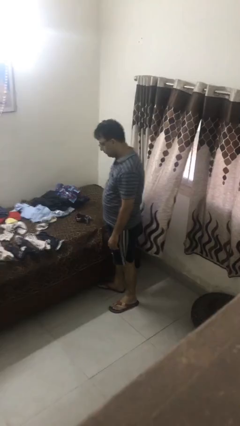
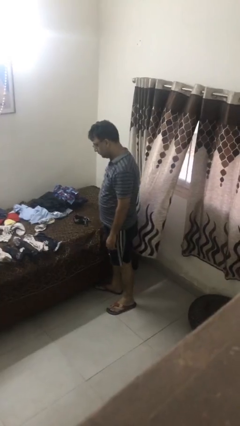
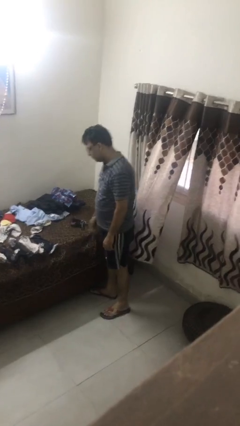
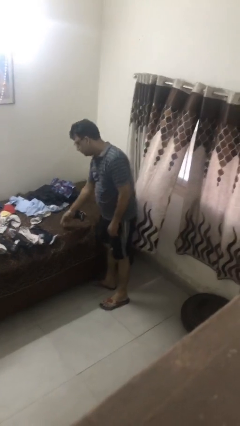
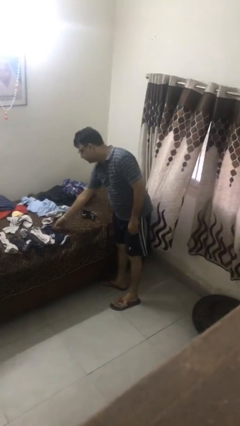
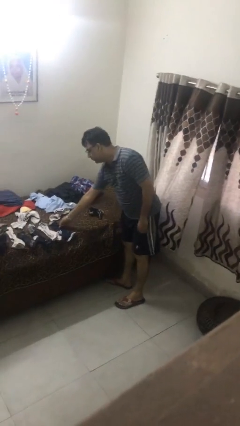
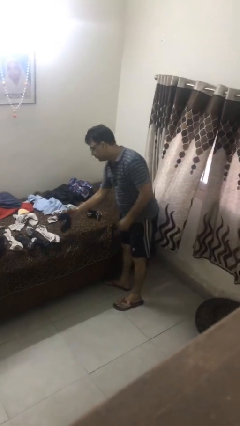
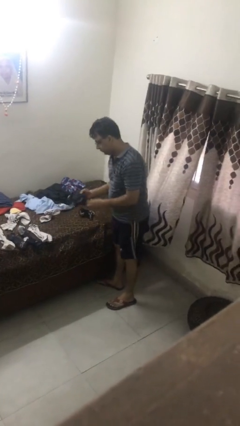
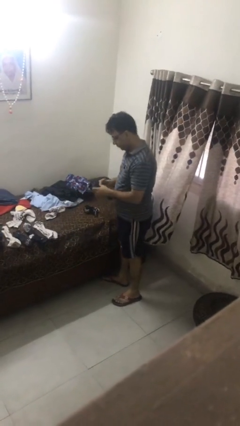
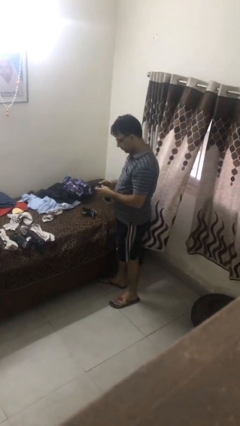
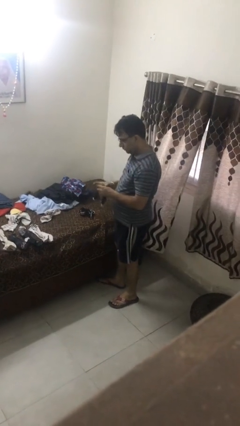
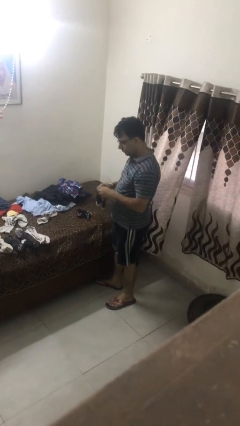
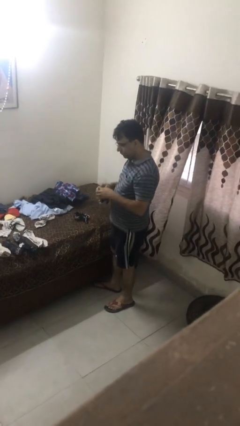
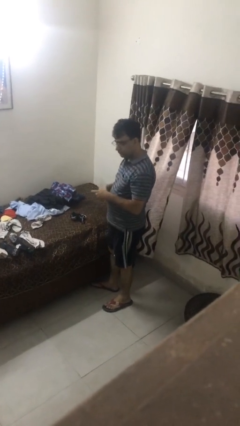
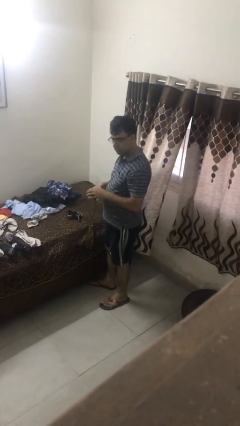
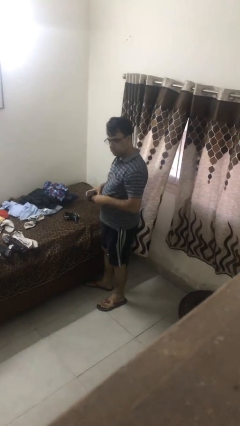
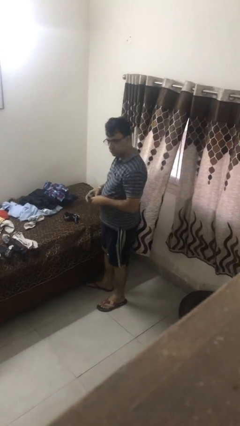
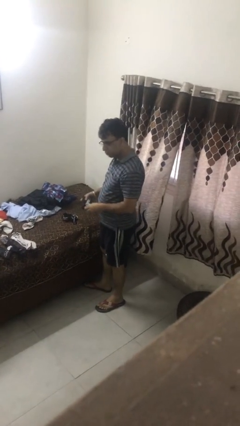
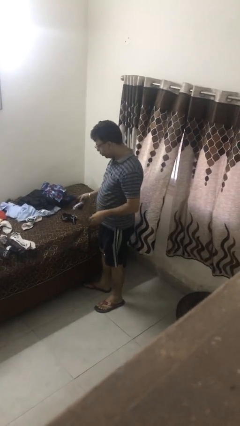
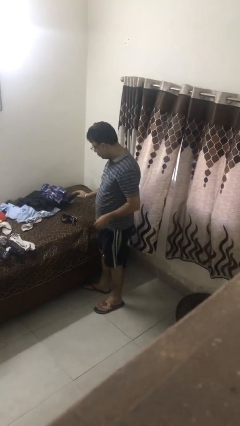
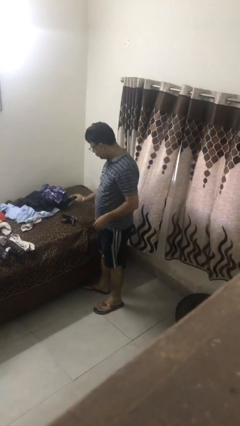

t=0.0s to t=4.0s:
person folds socks

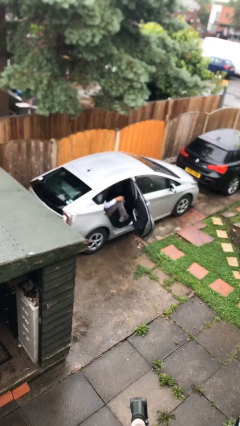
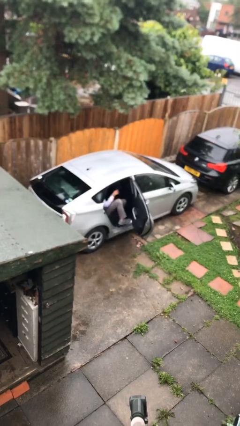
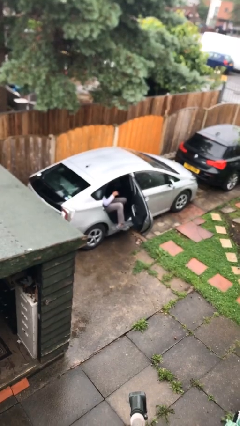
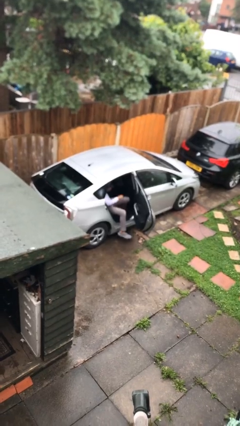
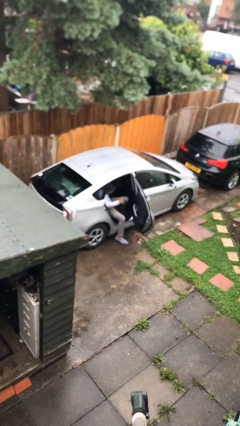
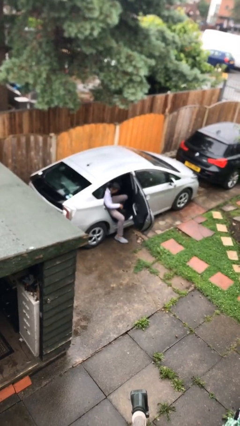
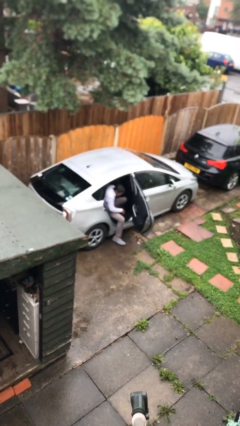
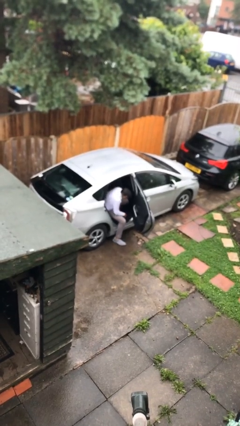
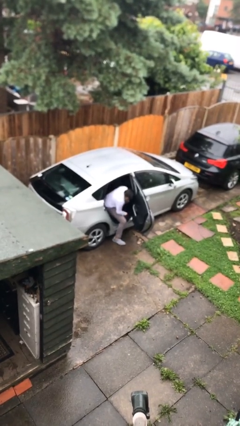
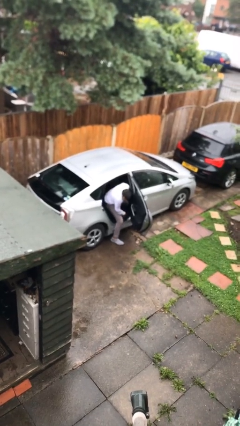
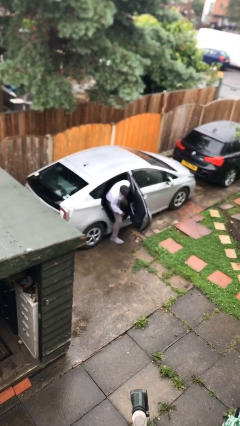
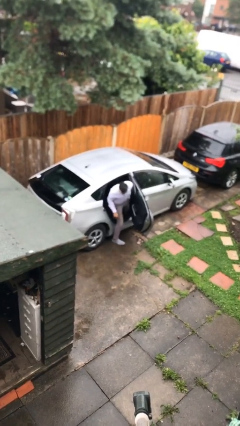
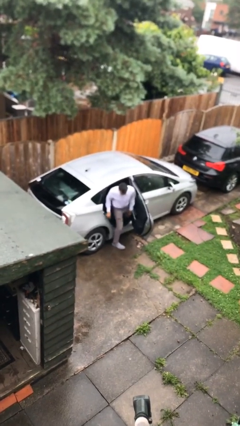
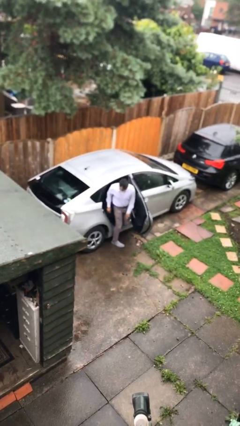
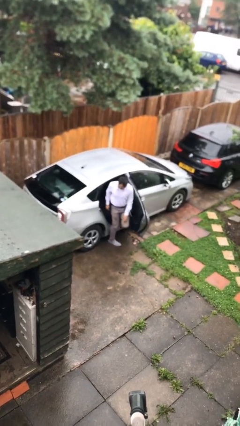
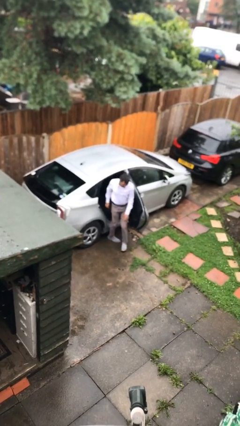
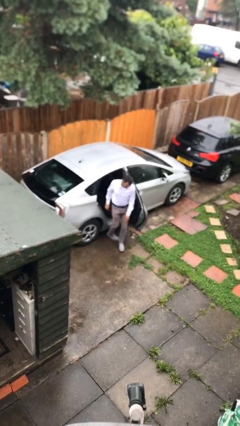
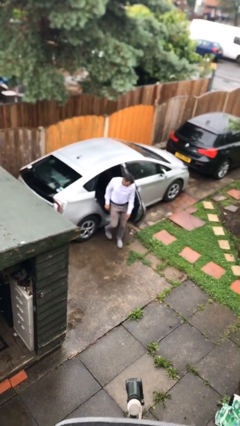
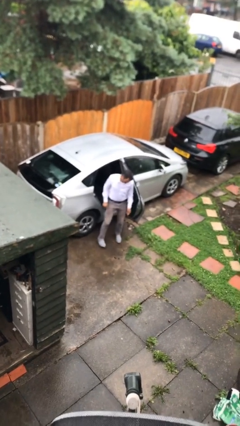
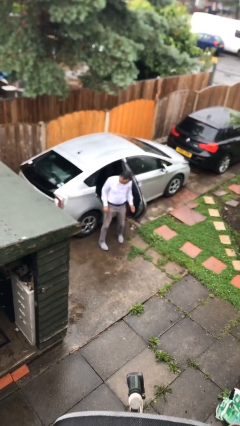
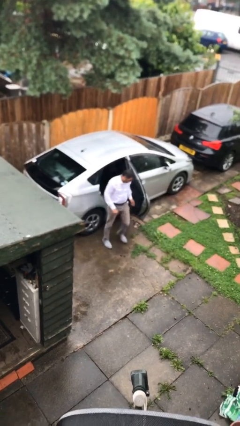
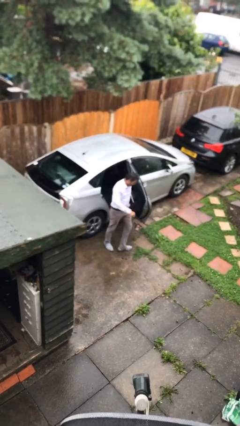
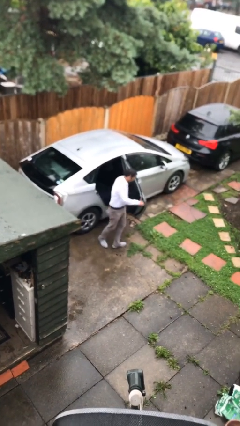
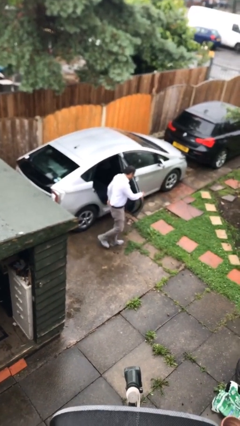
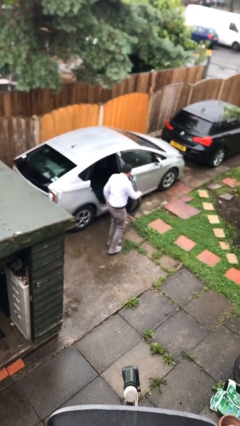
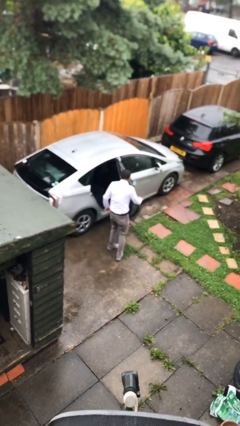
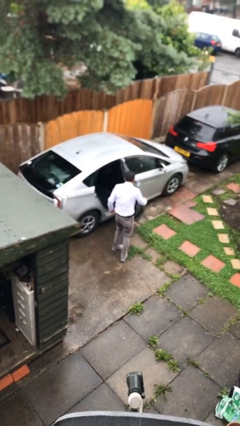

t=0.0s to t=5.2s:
person exits car

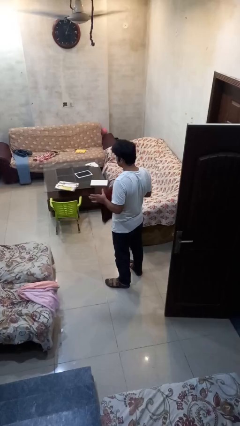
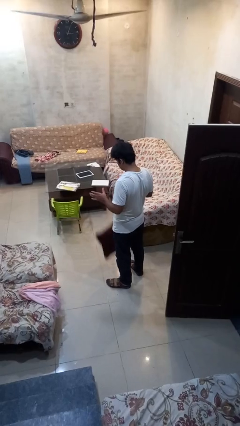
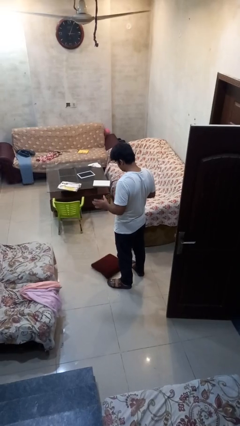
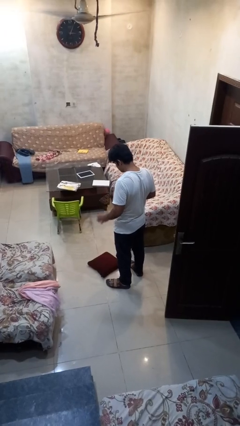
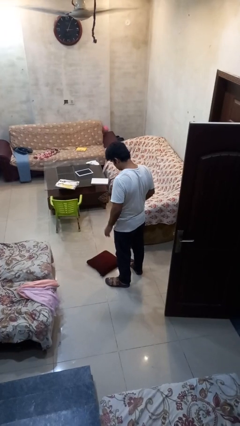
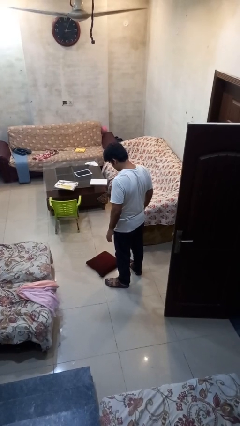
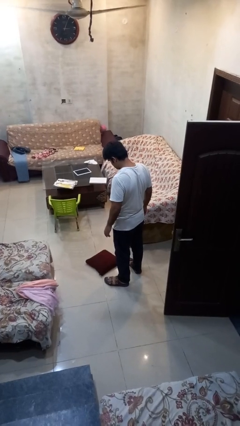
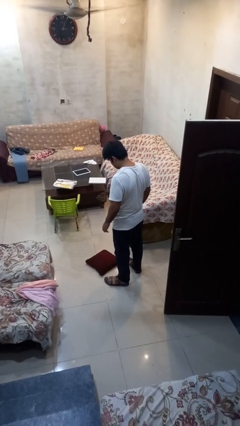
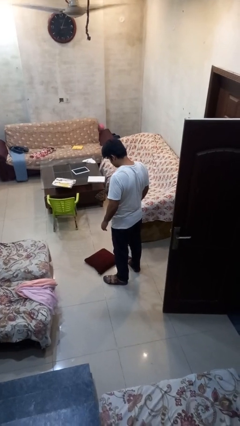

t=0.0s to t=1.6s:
person drops object

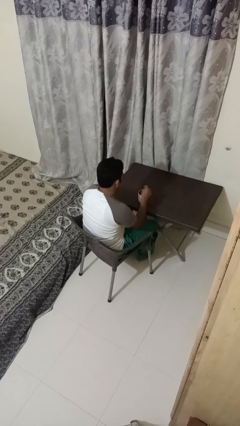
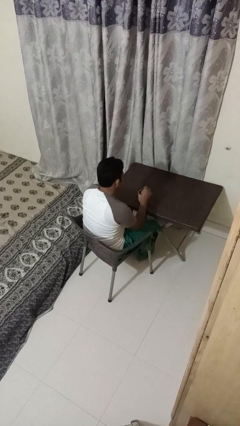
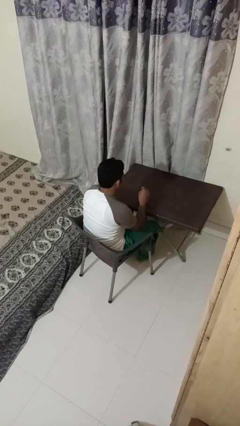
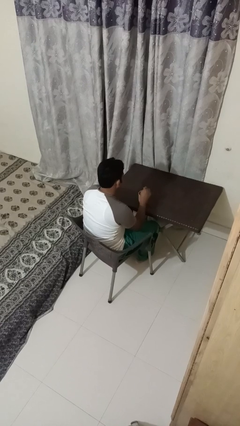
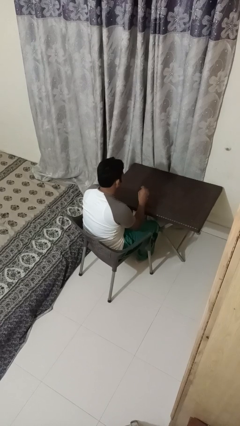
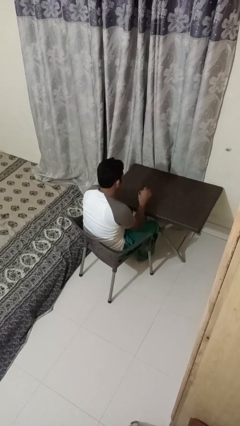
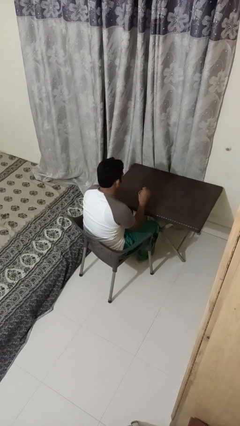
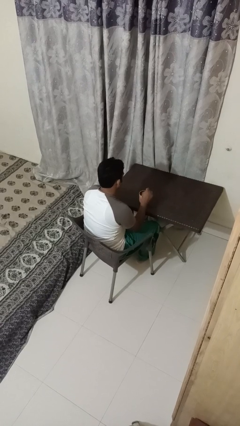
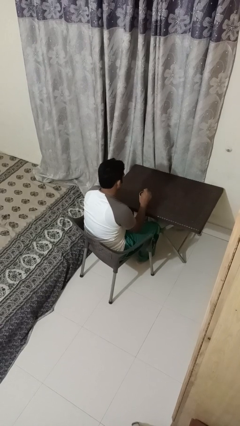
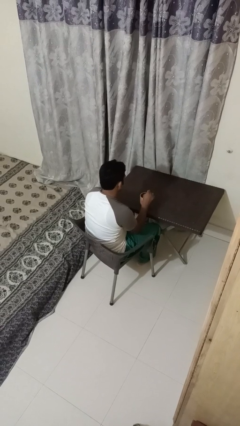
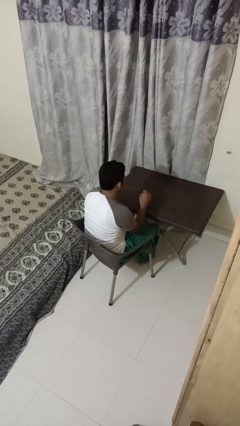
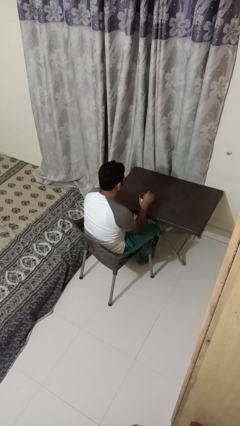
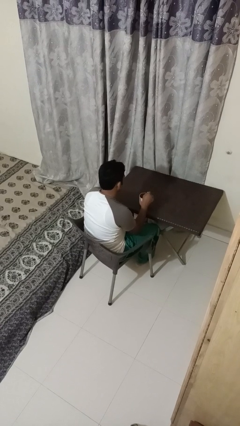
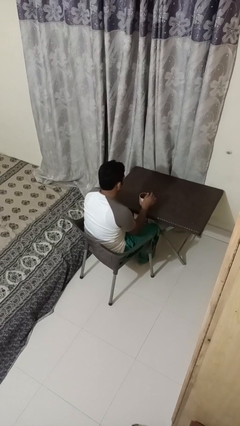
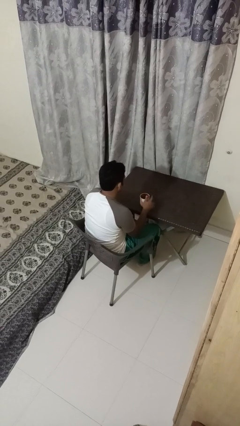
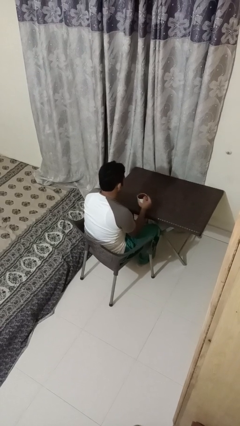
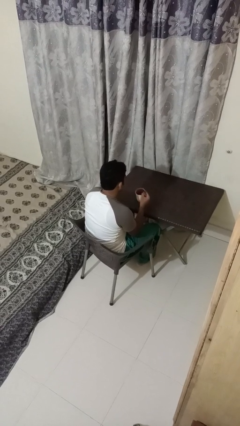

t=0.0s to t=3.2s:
person stirs mug

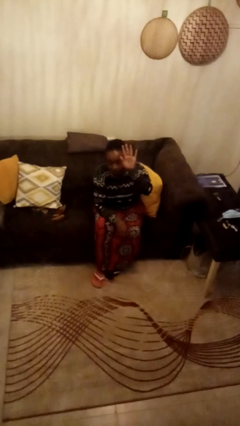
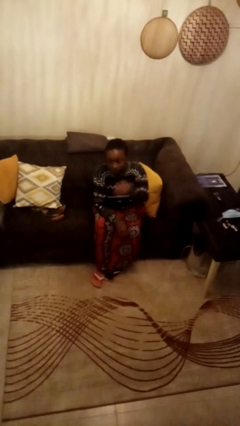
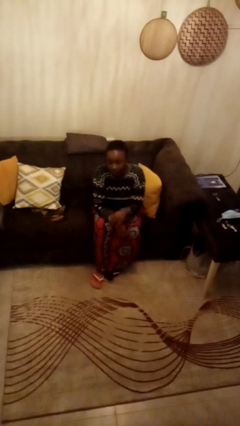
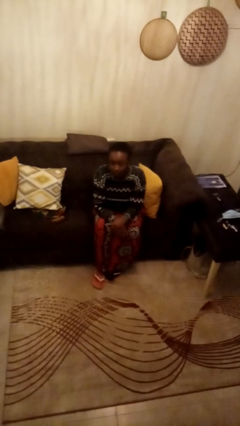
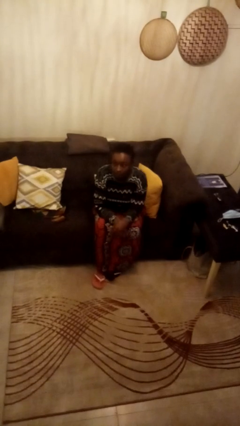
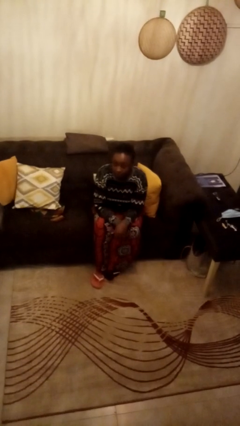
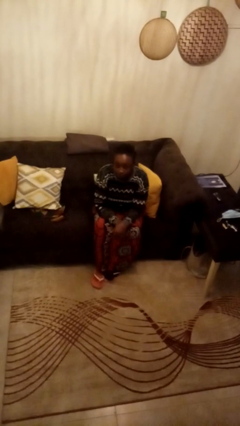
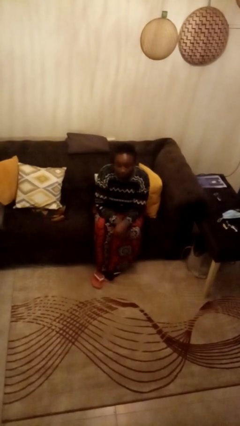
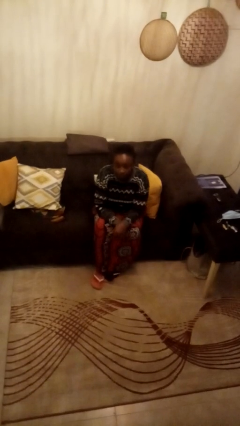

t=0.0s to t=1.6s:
person gestures lower hand

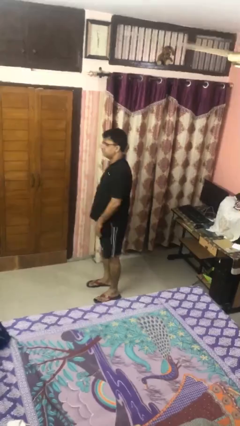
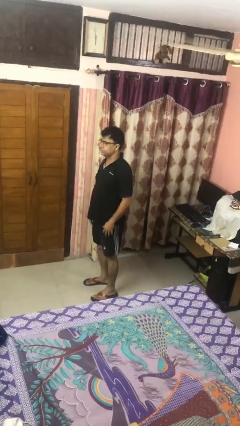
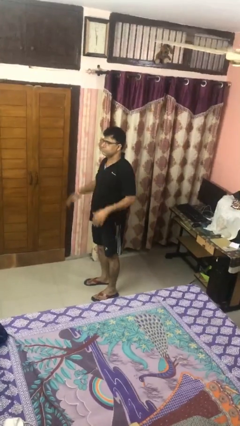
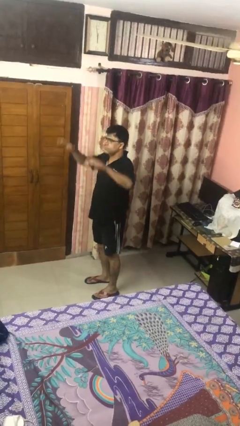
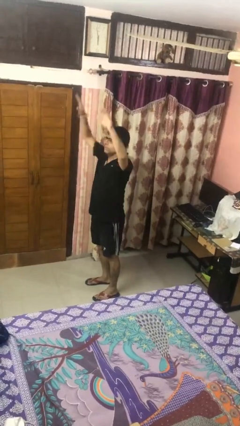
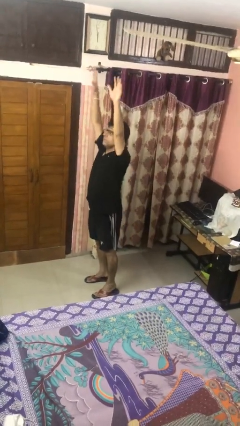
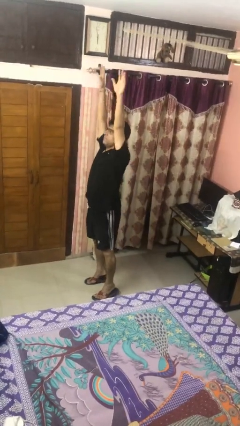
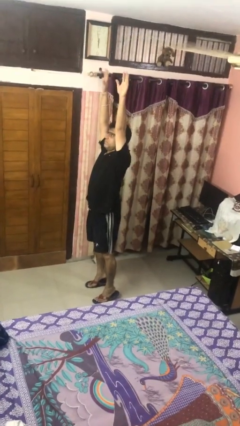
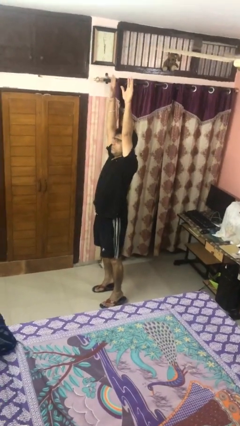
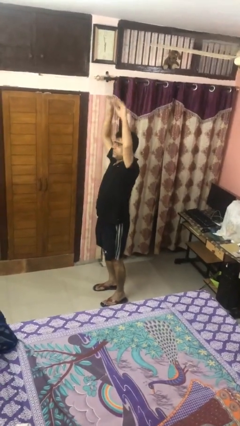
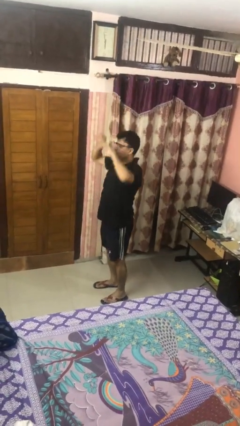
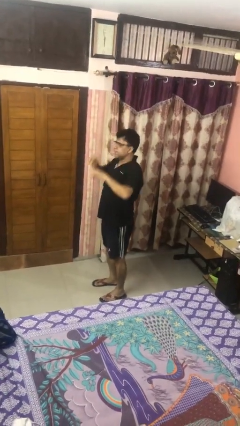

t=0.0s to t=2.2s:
person stretches arms over head
